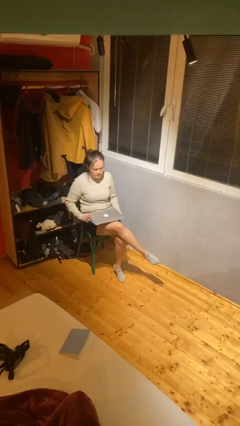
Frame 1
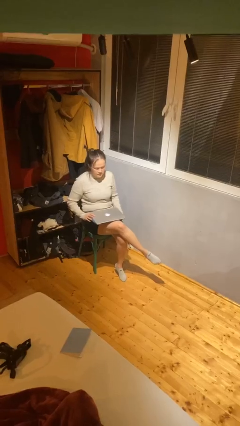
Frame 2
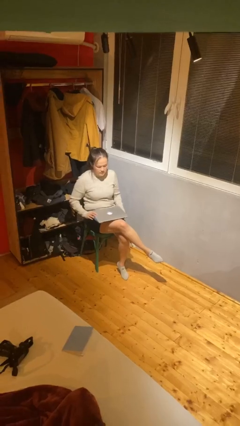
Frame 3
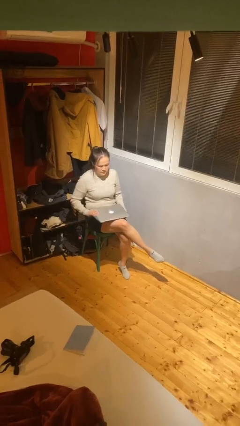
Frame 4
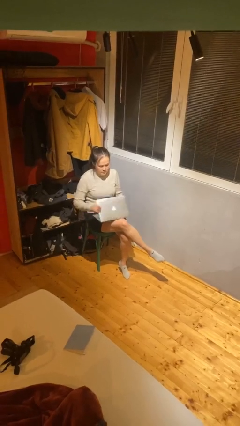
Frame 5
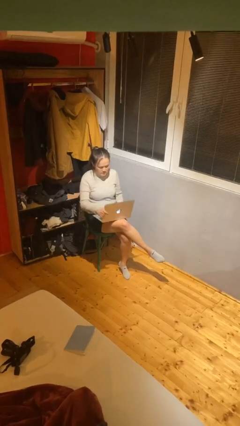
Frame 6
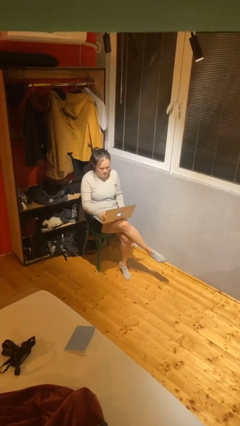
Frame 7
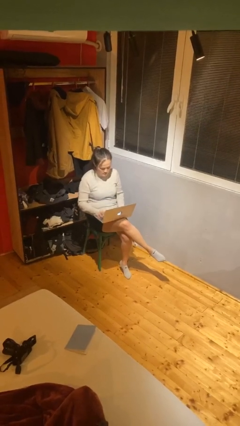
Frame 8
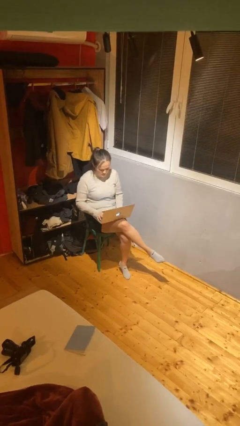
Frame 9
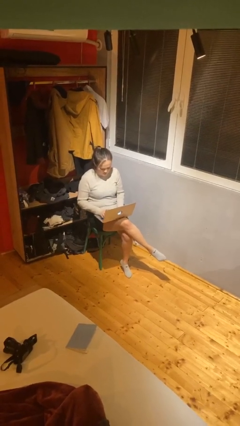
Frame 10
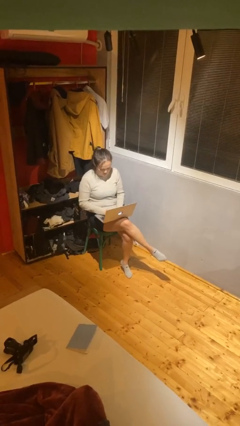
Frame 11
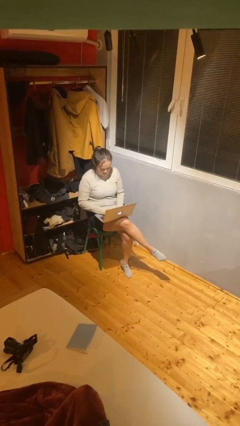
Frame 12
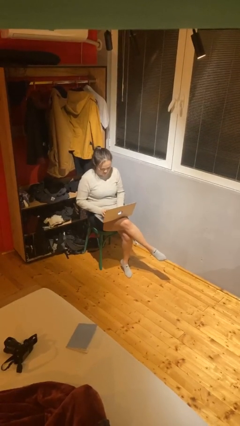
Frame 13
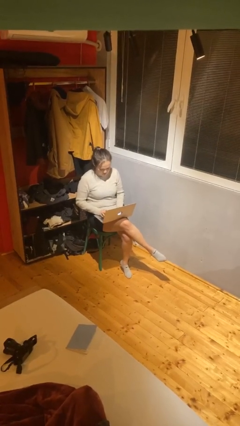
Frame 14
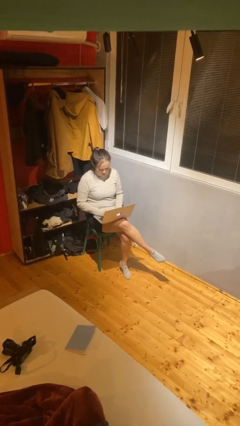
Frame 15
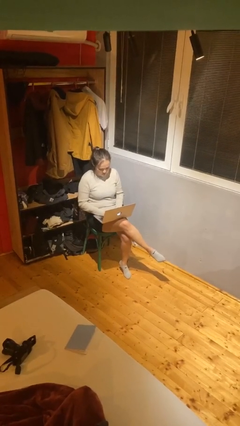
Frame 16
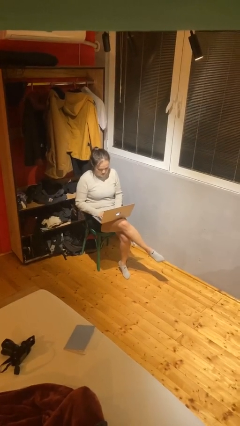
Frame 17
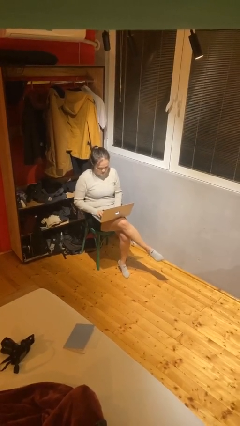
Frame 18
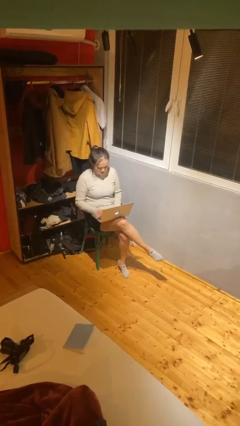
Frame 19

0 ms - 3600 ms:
person interacts with laptop

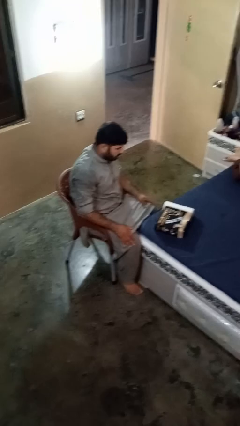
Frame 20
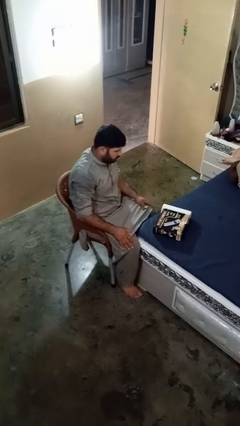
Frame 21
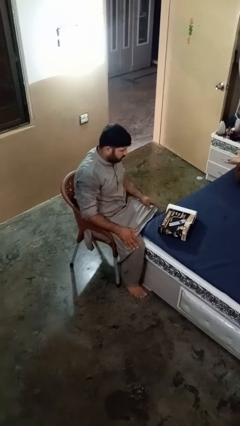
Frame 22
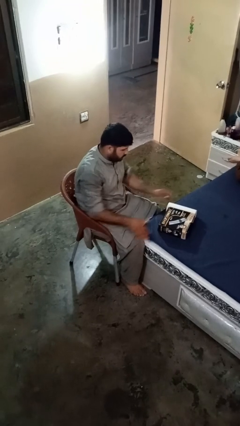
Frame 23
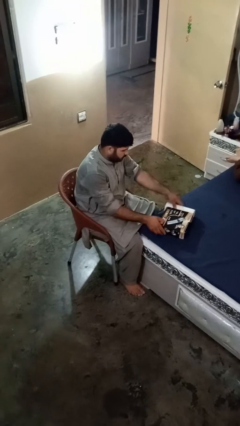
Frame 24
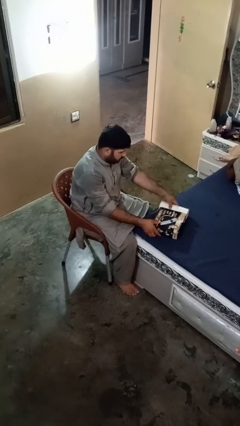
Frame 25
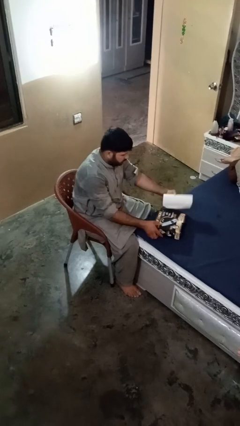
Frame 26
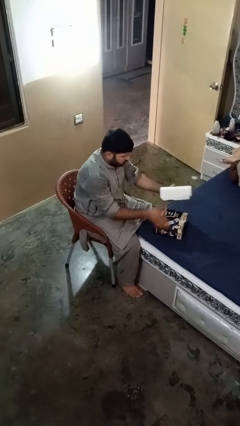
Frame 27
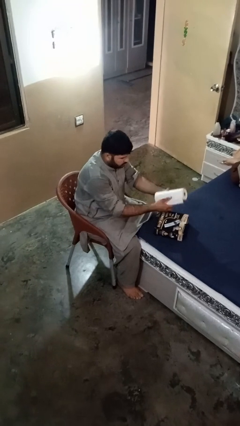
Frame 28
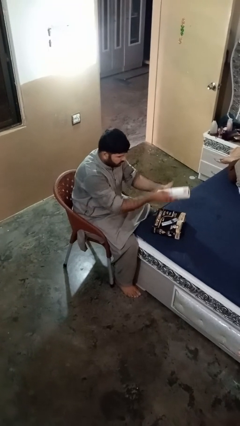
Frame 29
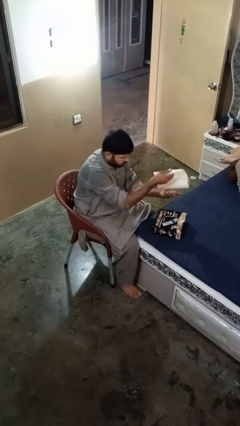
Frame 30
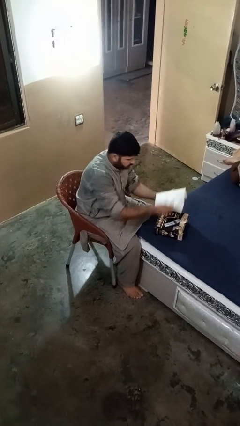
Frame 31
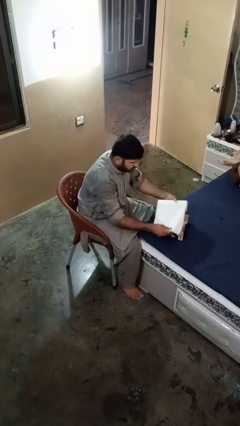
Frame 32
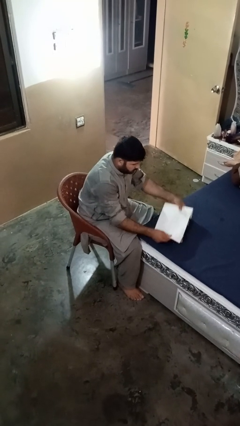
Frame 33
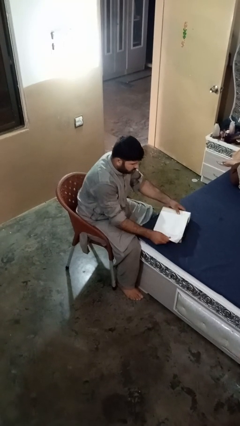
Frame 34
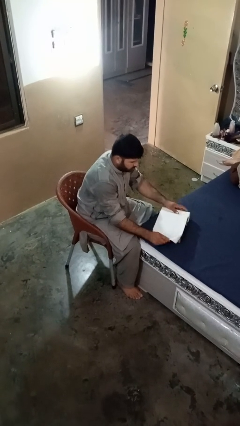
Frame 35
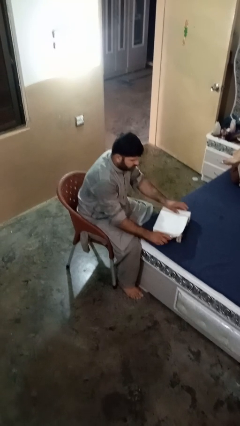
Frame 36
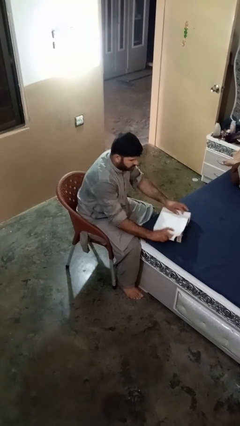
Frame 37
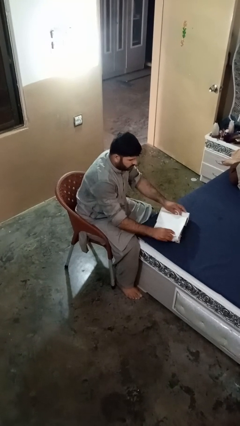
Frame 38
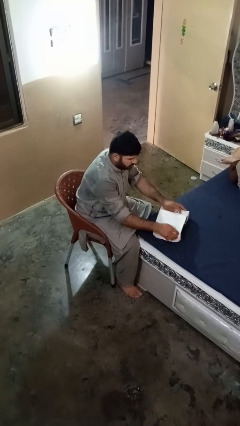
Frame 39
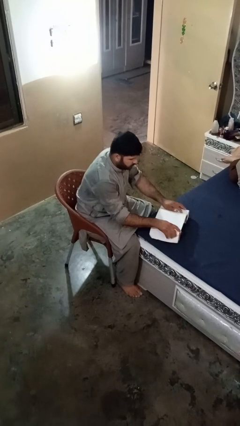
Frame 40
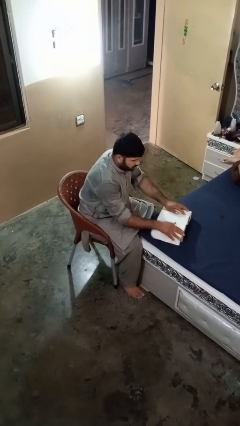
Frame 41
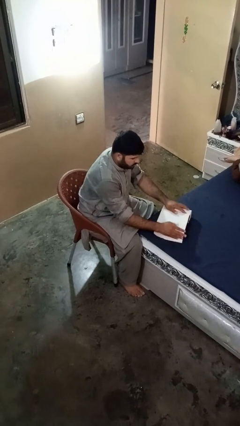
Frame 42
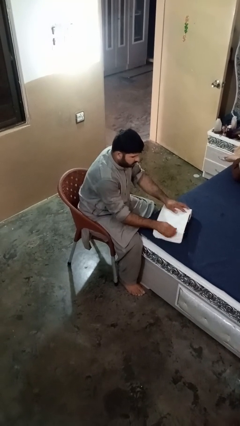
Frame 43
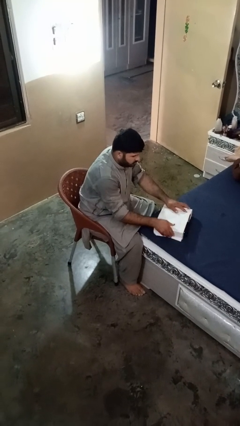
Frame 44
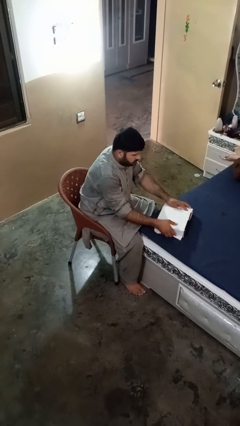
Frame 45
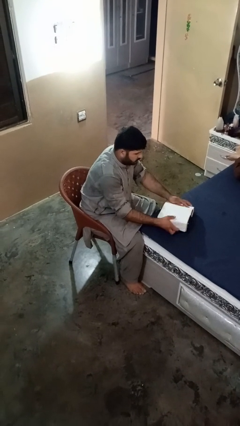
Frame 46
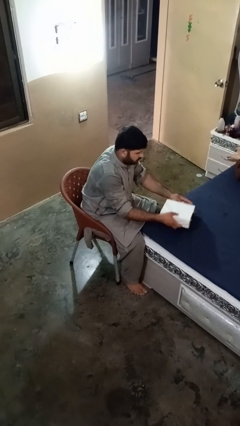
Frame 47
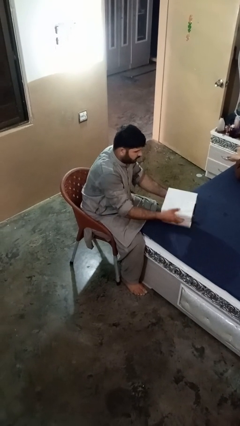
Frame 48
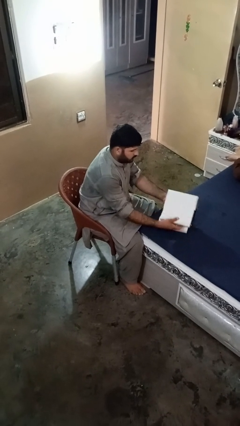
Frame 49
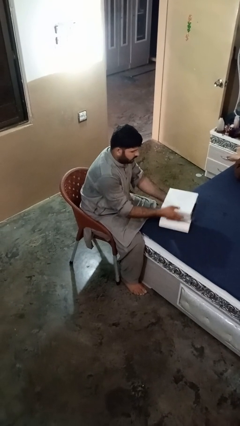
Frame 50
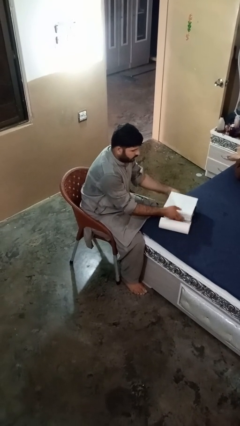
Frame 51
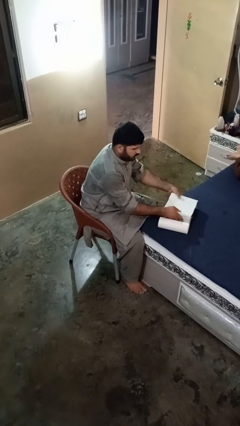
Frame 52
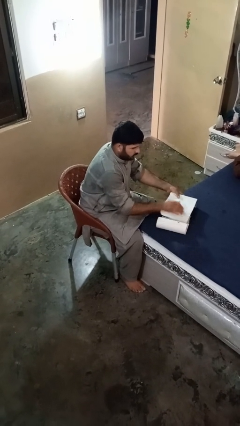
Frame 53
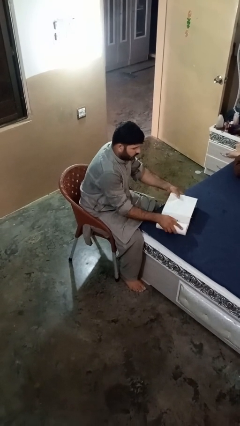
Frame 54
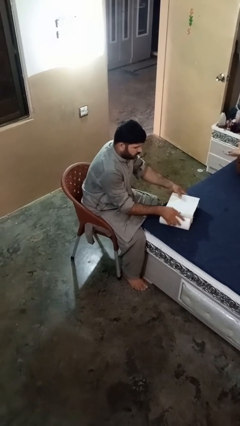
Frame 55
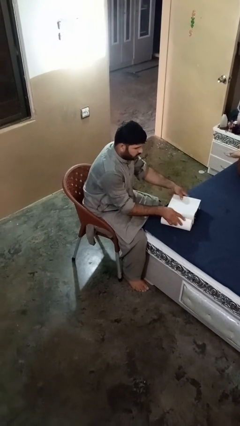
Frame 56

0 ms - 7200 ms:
person wraps box

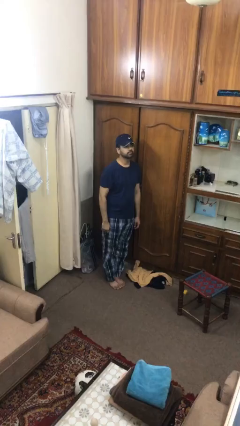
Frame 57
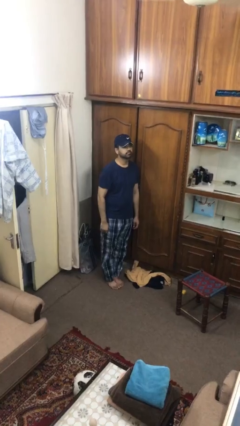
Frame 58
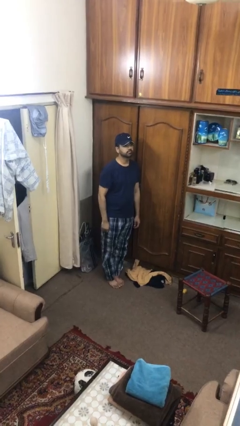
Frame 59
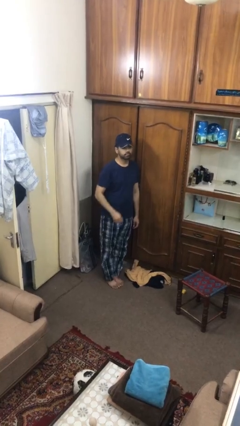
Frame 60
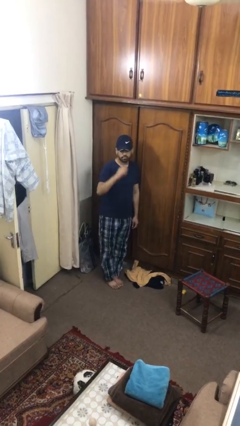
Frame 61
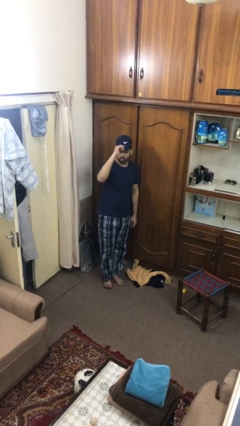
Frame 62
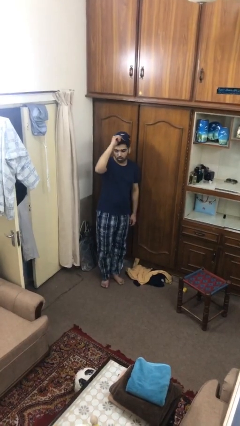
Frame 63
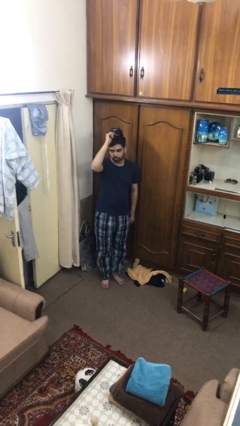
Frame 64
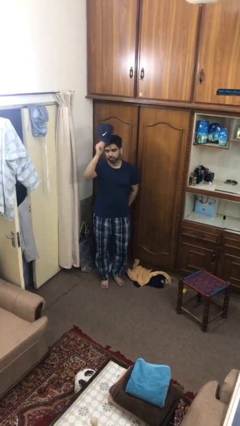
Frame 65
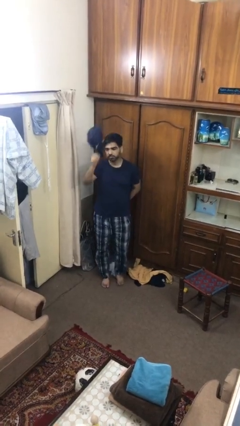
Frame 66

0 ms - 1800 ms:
person takes off hat

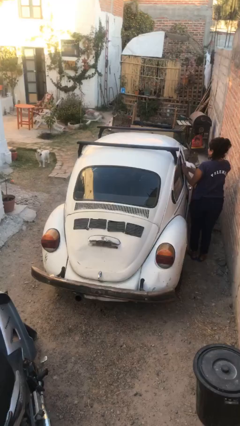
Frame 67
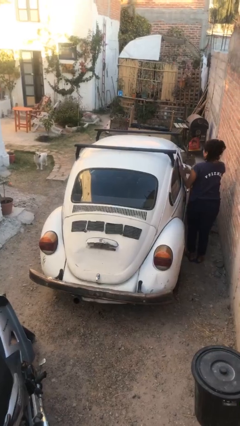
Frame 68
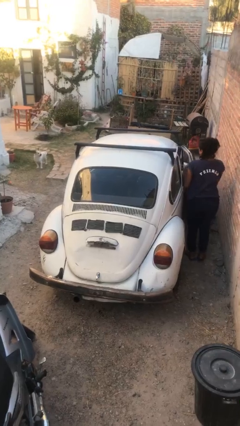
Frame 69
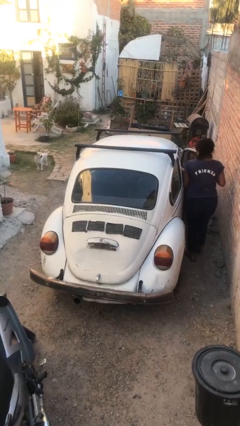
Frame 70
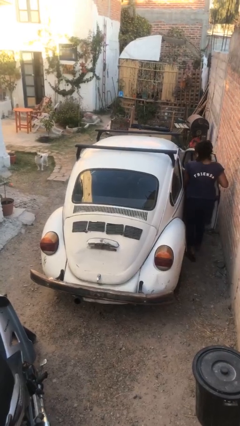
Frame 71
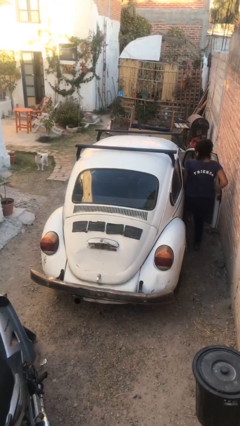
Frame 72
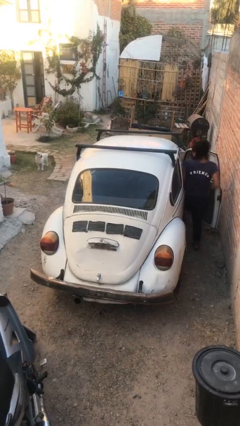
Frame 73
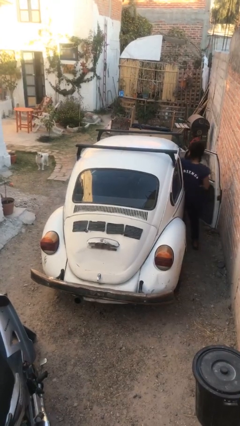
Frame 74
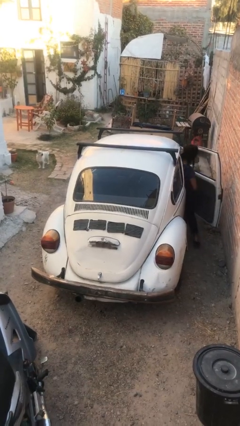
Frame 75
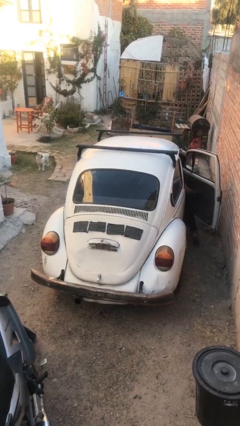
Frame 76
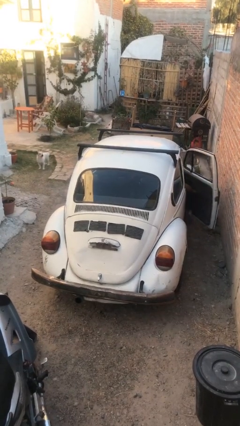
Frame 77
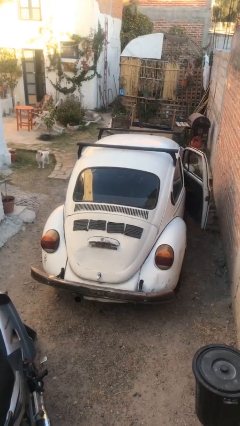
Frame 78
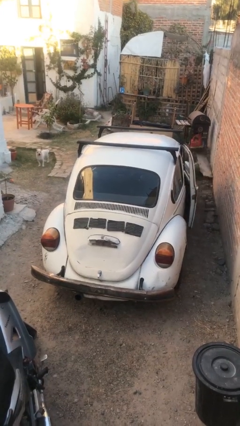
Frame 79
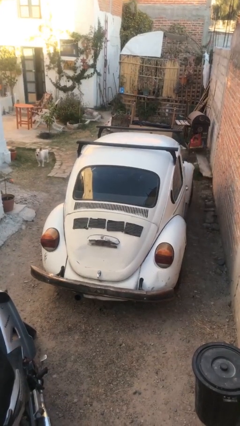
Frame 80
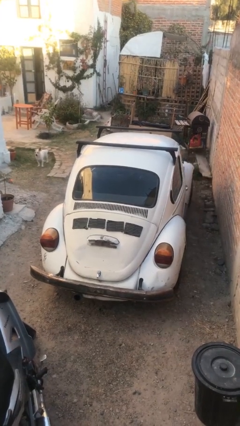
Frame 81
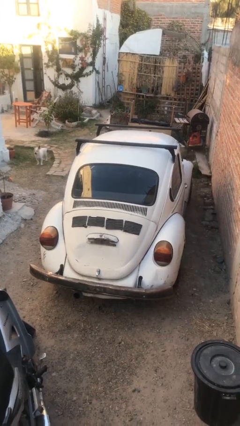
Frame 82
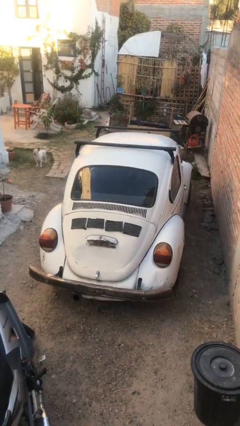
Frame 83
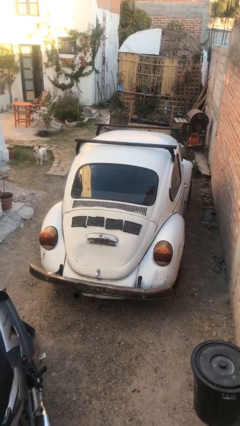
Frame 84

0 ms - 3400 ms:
car picks up person

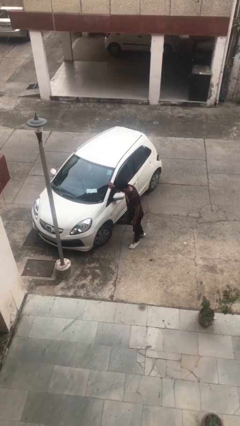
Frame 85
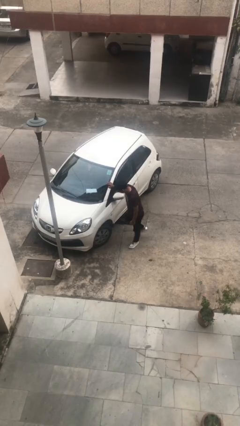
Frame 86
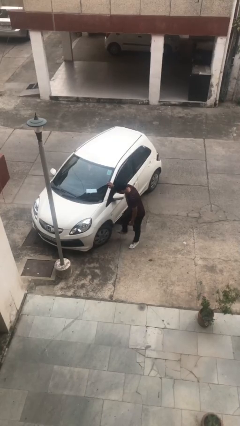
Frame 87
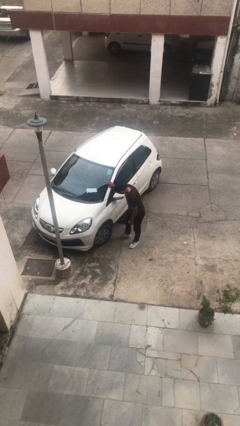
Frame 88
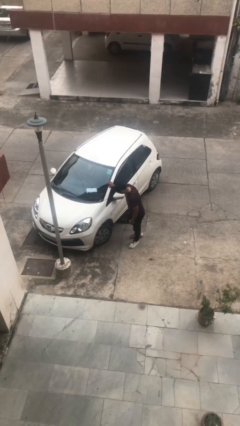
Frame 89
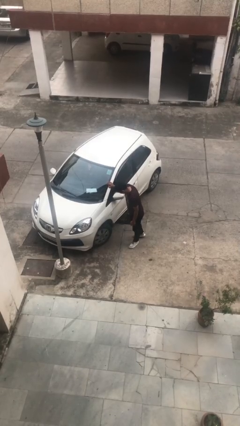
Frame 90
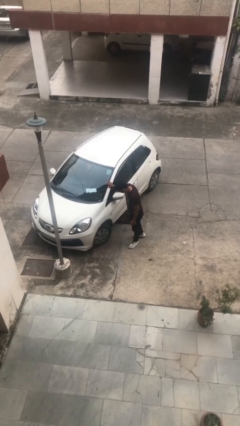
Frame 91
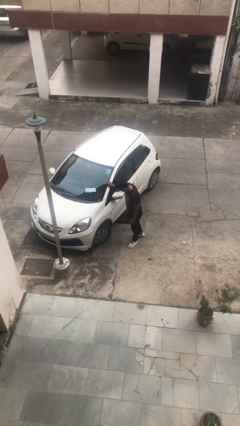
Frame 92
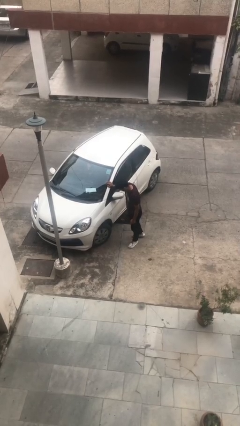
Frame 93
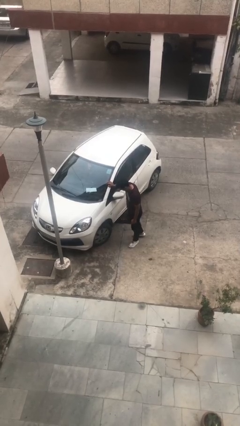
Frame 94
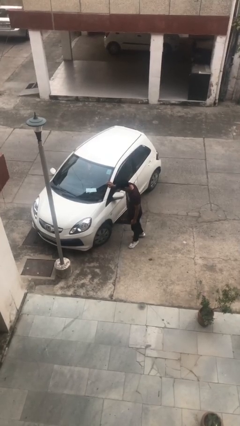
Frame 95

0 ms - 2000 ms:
person kicks car tires
